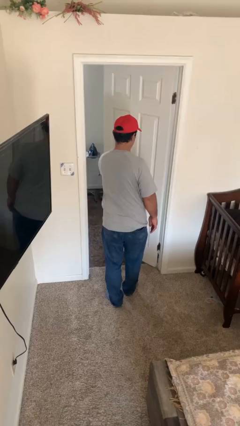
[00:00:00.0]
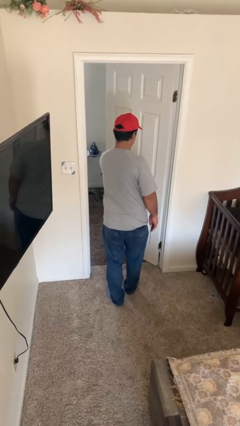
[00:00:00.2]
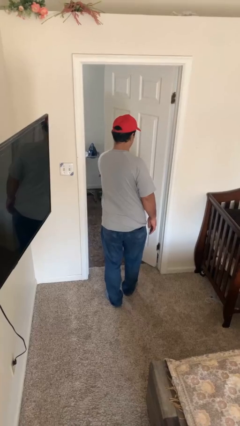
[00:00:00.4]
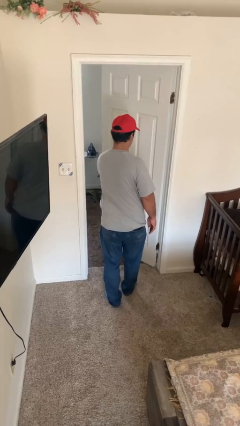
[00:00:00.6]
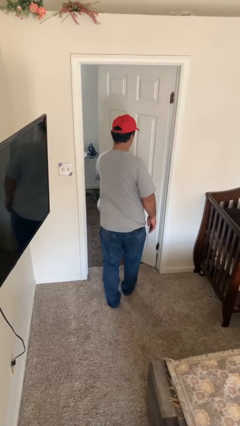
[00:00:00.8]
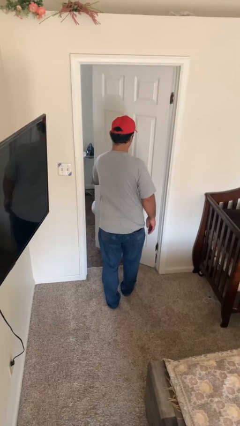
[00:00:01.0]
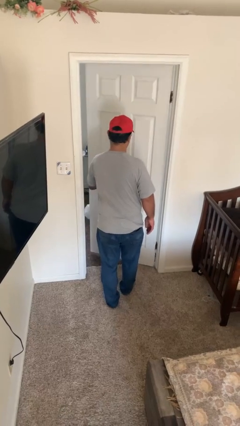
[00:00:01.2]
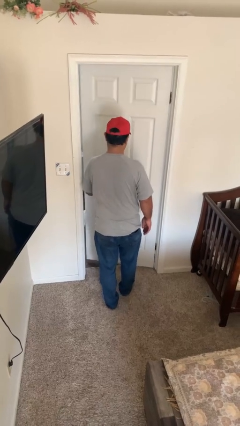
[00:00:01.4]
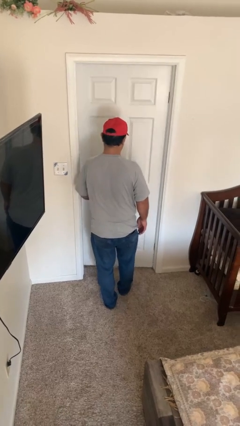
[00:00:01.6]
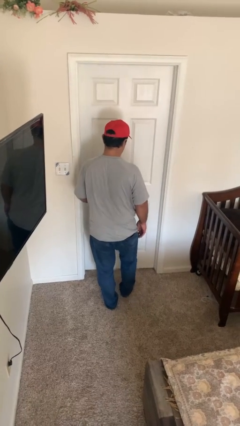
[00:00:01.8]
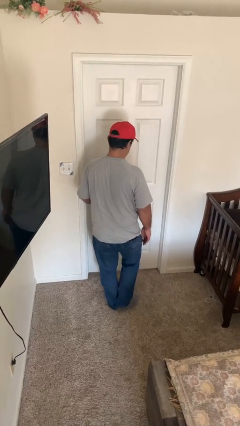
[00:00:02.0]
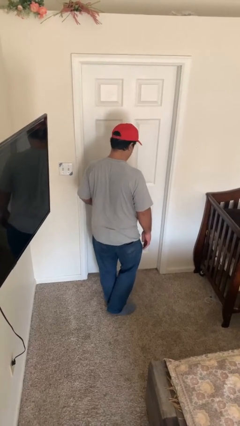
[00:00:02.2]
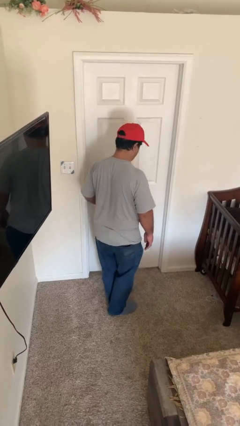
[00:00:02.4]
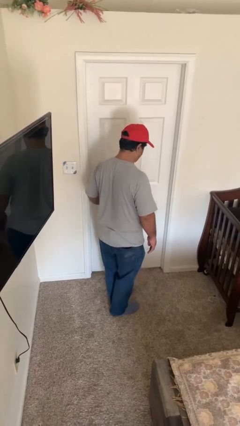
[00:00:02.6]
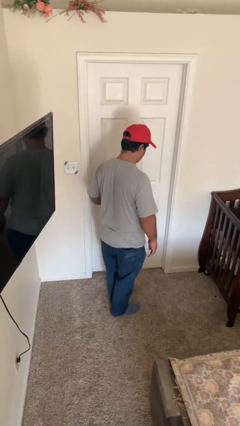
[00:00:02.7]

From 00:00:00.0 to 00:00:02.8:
person closes facility door

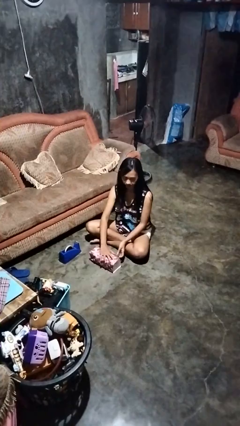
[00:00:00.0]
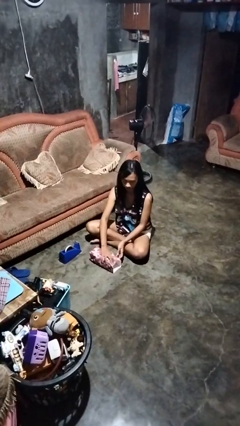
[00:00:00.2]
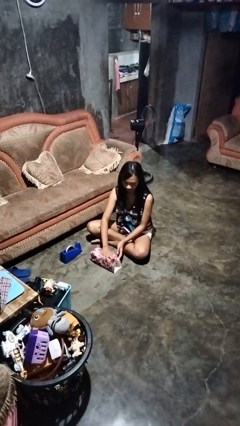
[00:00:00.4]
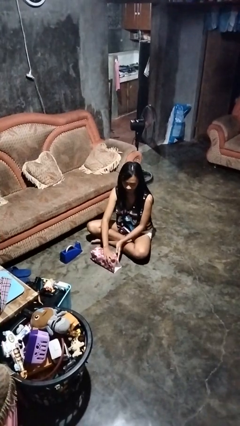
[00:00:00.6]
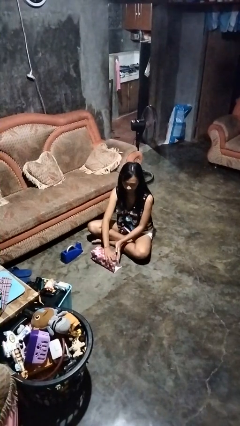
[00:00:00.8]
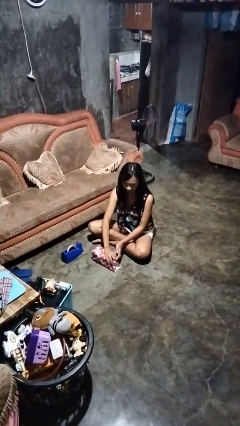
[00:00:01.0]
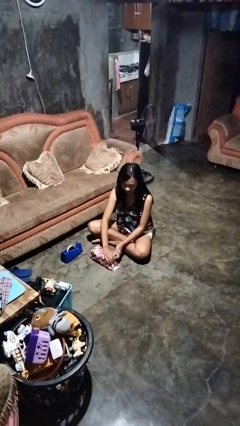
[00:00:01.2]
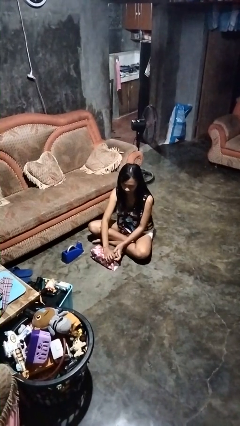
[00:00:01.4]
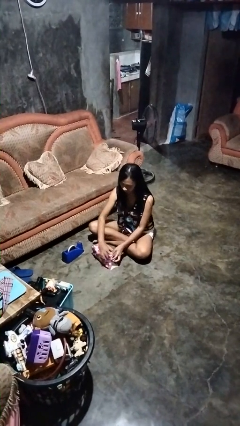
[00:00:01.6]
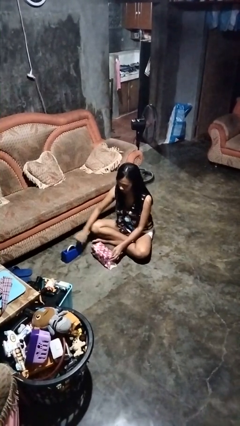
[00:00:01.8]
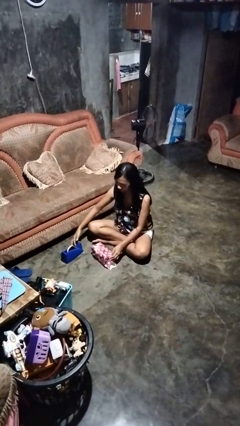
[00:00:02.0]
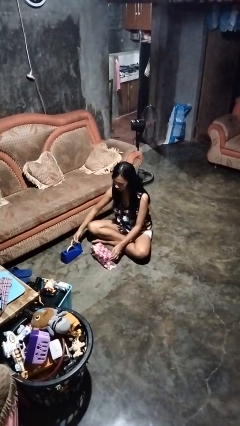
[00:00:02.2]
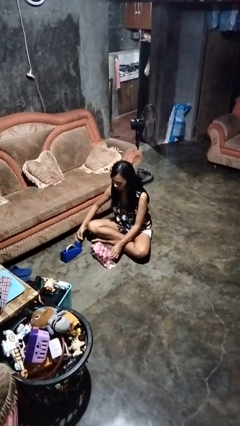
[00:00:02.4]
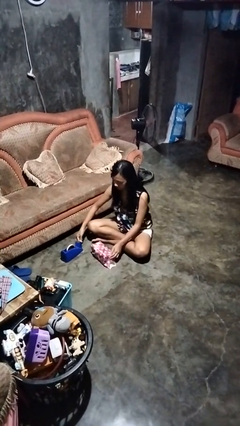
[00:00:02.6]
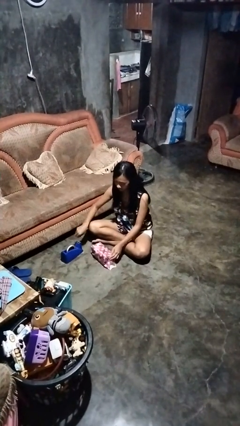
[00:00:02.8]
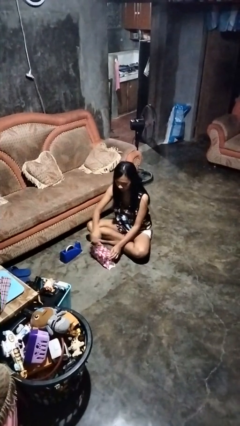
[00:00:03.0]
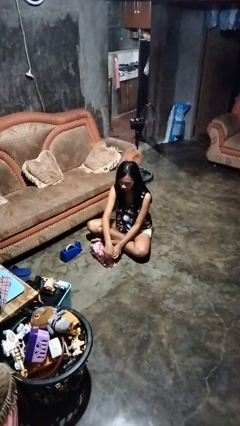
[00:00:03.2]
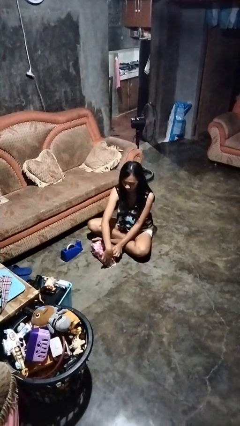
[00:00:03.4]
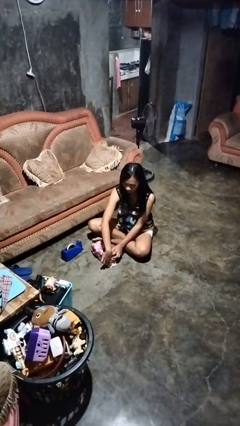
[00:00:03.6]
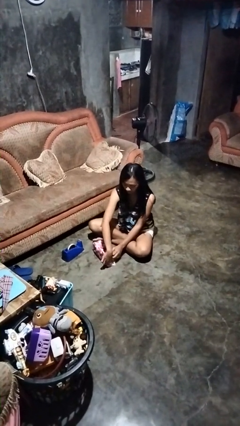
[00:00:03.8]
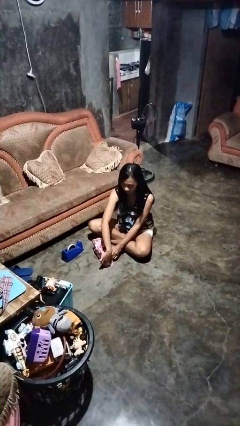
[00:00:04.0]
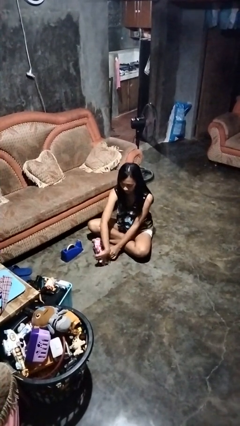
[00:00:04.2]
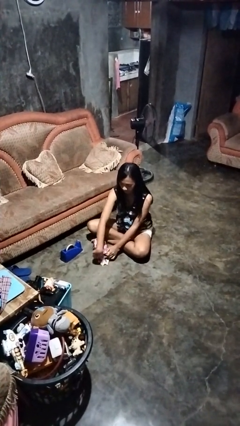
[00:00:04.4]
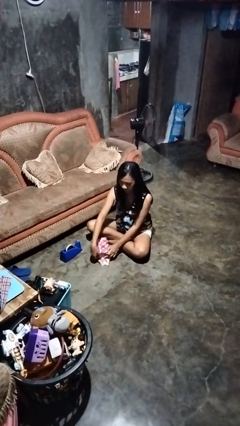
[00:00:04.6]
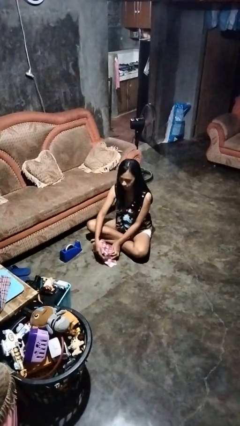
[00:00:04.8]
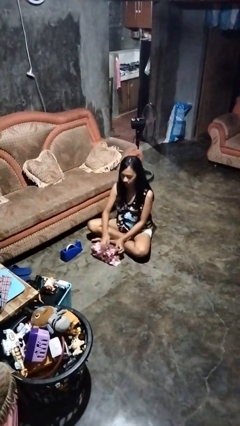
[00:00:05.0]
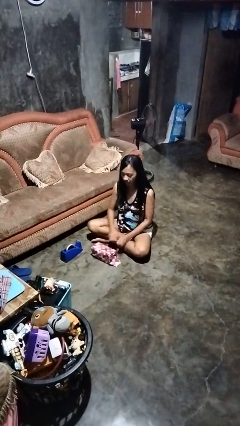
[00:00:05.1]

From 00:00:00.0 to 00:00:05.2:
person wraps box

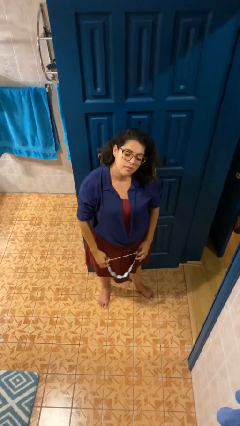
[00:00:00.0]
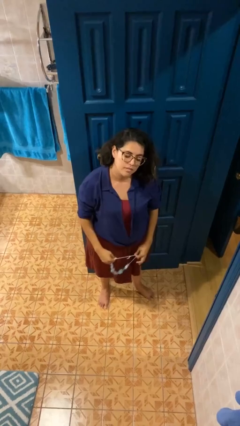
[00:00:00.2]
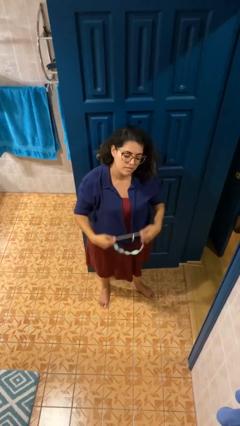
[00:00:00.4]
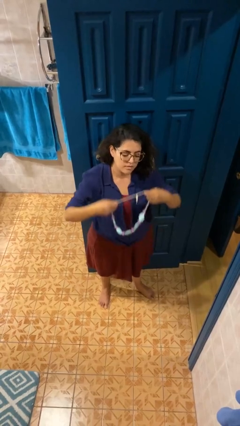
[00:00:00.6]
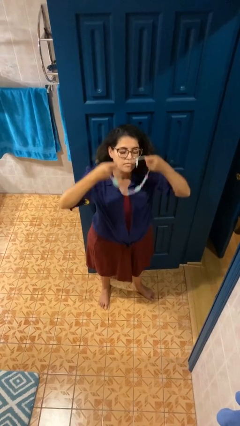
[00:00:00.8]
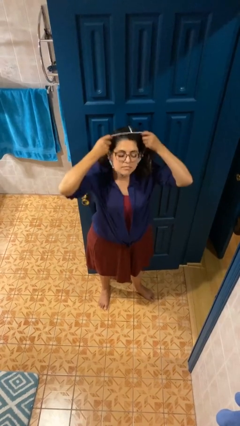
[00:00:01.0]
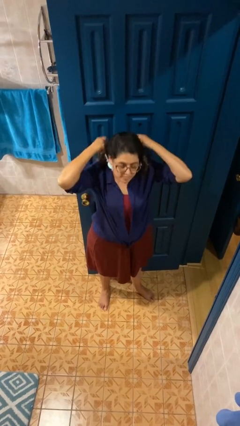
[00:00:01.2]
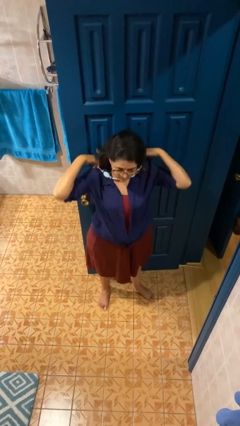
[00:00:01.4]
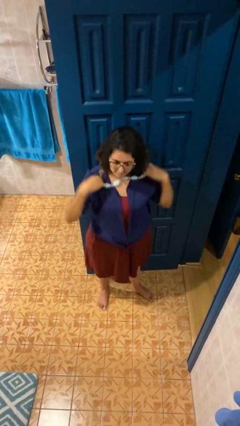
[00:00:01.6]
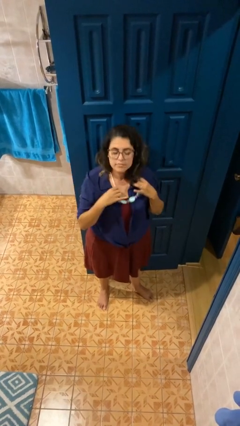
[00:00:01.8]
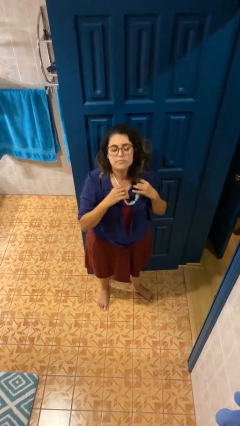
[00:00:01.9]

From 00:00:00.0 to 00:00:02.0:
person puts on necklace

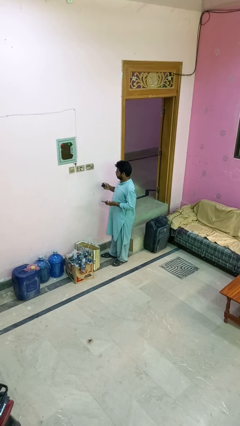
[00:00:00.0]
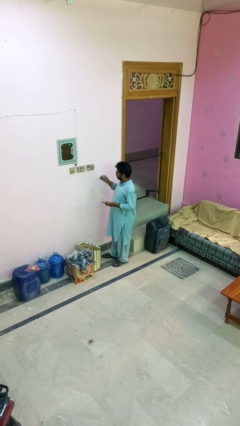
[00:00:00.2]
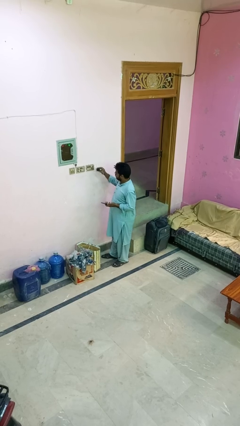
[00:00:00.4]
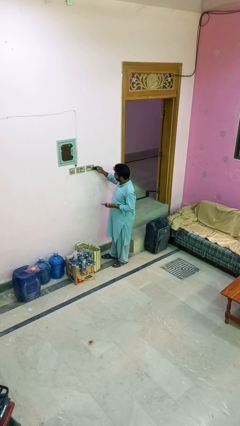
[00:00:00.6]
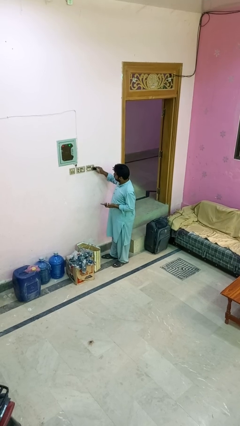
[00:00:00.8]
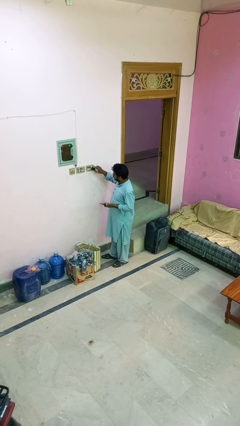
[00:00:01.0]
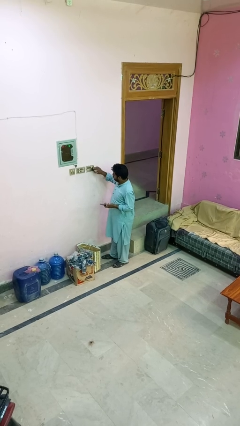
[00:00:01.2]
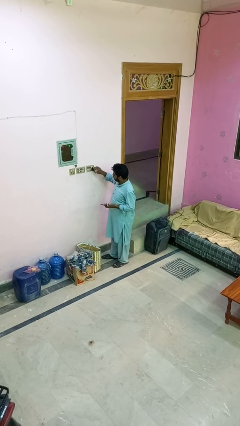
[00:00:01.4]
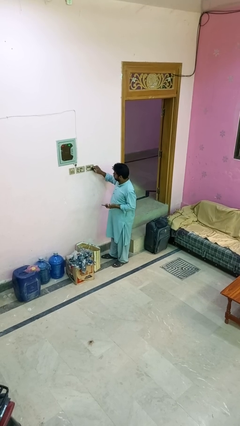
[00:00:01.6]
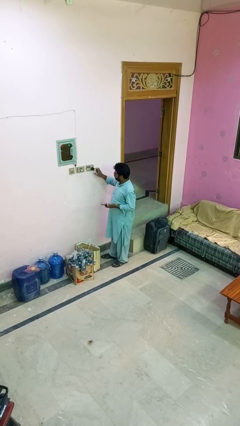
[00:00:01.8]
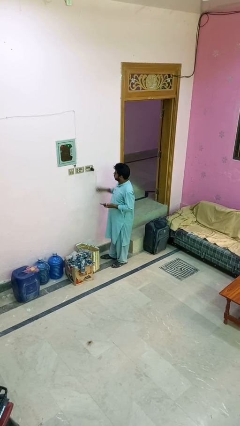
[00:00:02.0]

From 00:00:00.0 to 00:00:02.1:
person plugs into electrical socket

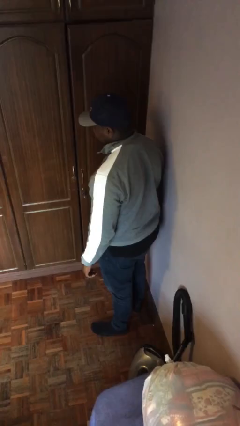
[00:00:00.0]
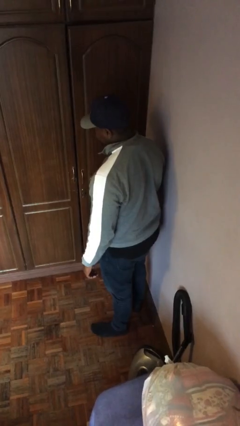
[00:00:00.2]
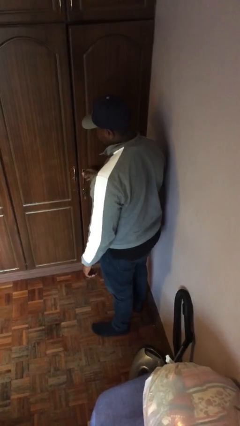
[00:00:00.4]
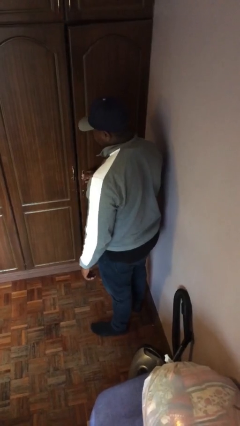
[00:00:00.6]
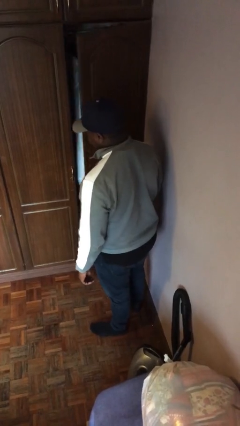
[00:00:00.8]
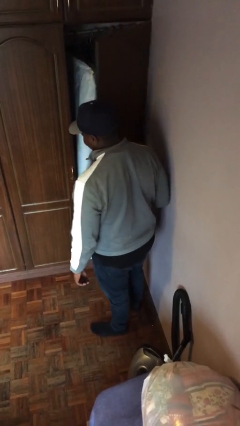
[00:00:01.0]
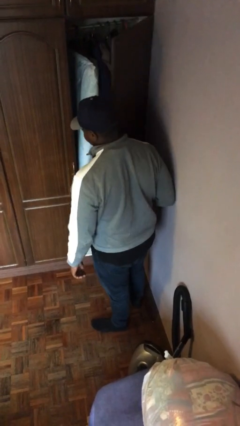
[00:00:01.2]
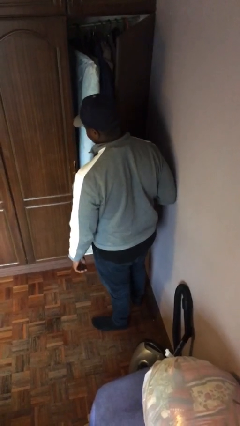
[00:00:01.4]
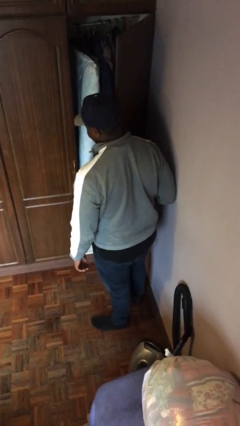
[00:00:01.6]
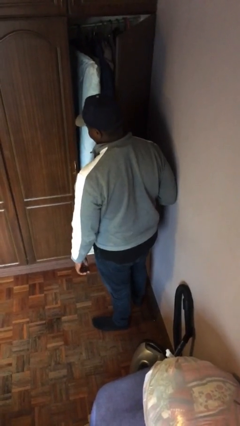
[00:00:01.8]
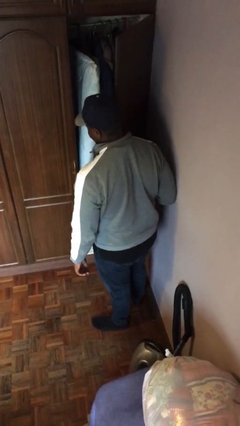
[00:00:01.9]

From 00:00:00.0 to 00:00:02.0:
person opens closet door

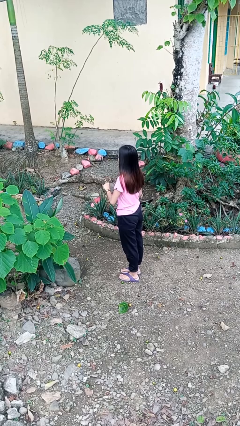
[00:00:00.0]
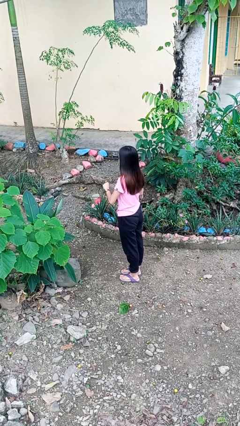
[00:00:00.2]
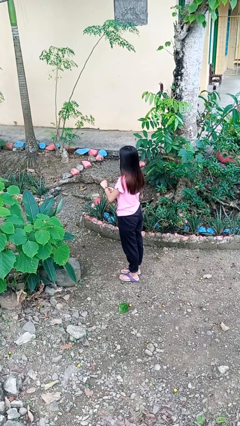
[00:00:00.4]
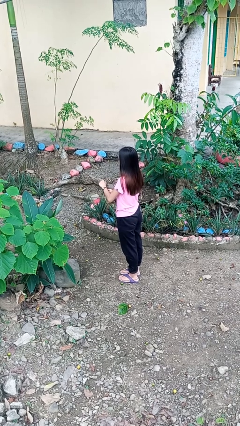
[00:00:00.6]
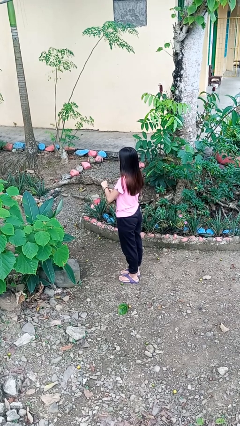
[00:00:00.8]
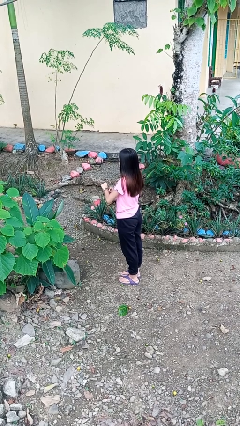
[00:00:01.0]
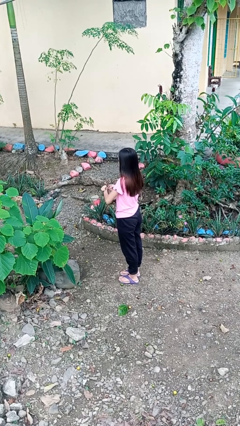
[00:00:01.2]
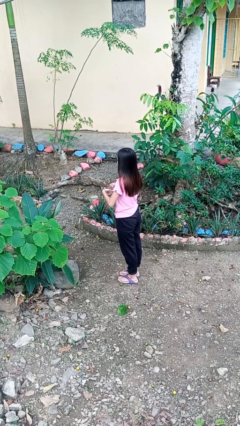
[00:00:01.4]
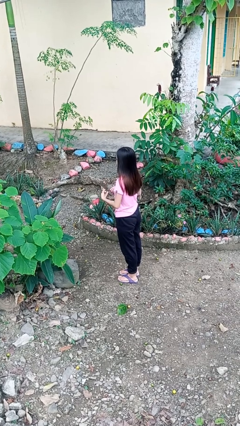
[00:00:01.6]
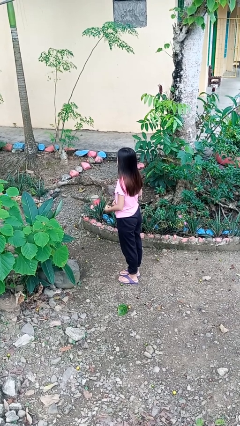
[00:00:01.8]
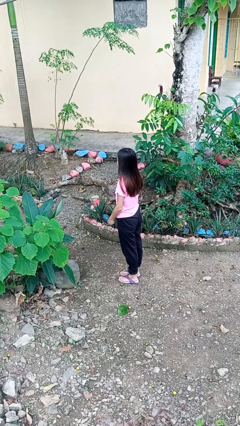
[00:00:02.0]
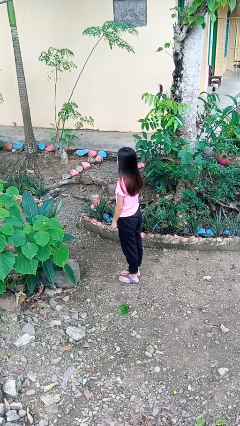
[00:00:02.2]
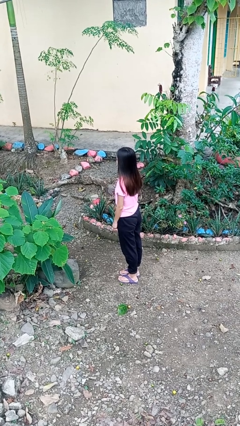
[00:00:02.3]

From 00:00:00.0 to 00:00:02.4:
person takes off wristwatch

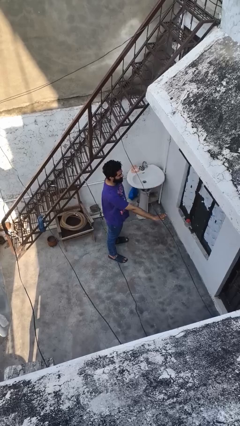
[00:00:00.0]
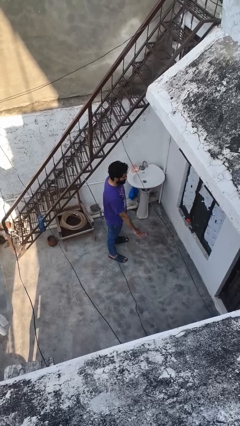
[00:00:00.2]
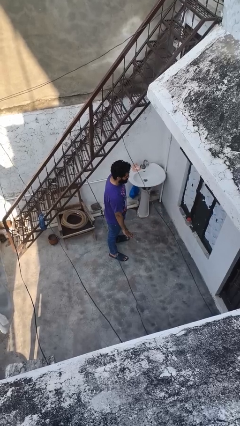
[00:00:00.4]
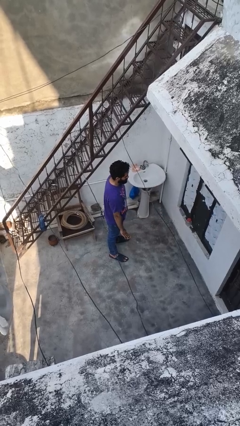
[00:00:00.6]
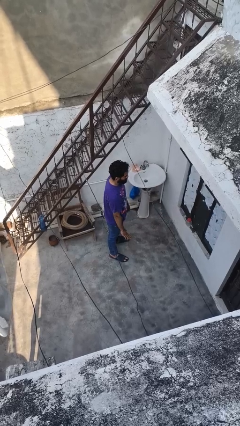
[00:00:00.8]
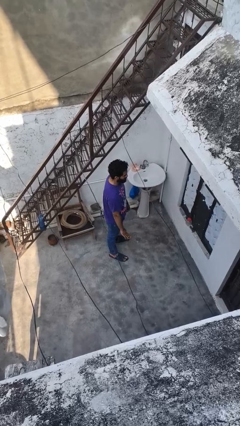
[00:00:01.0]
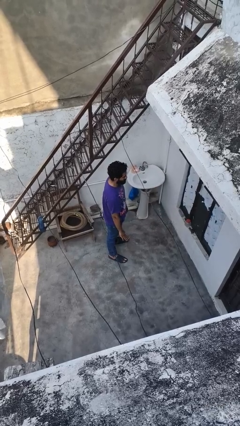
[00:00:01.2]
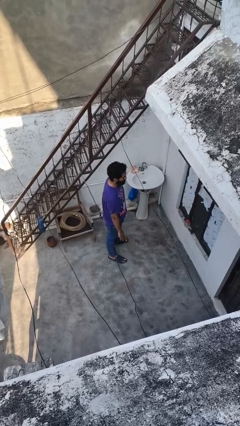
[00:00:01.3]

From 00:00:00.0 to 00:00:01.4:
person gestures lower hand
